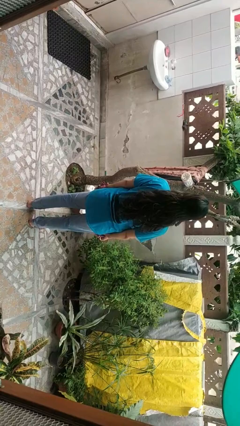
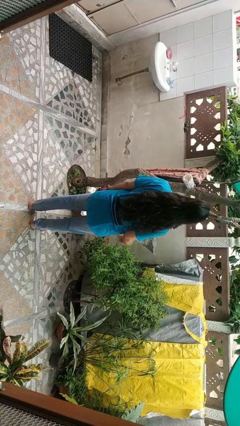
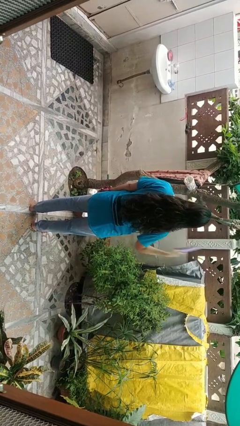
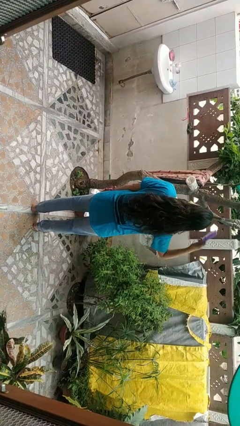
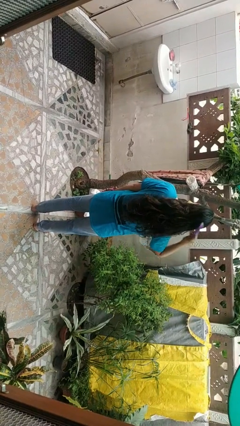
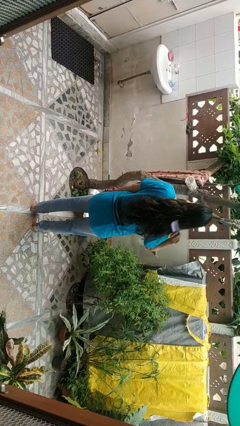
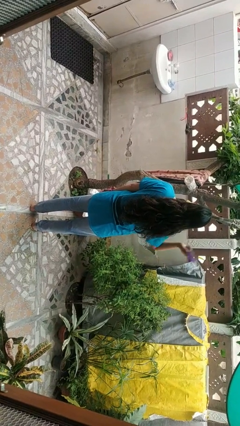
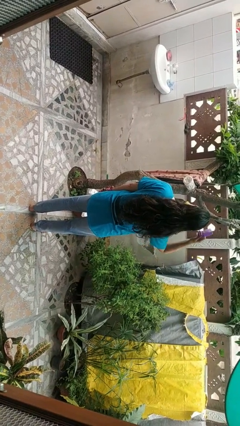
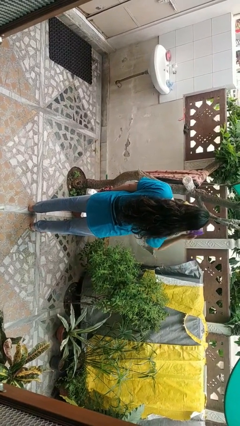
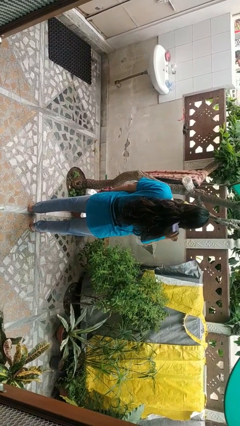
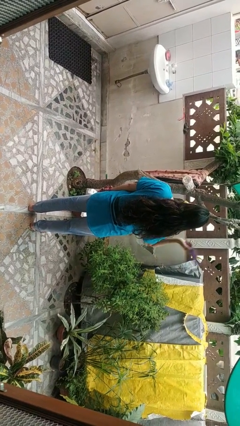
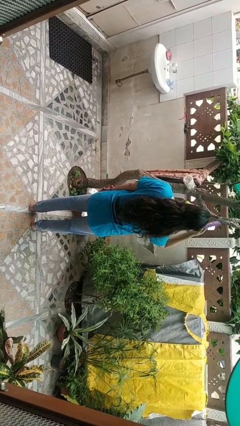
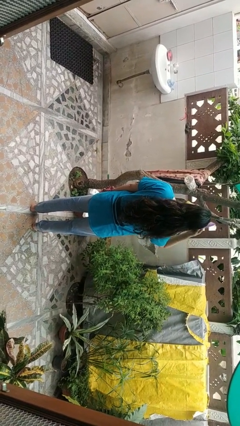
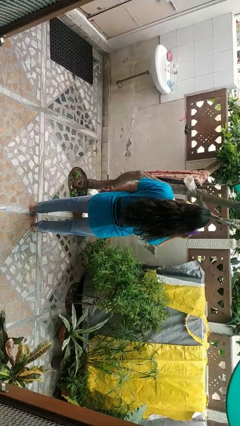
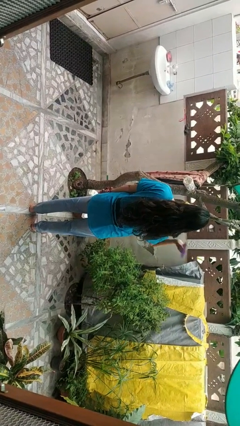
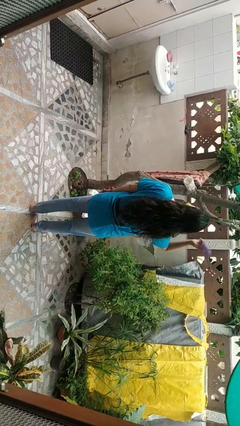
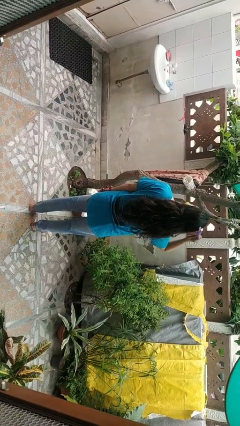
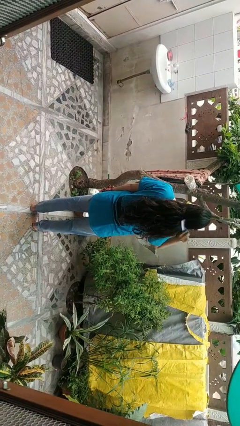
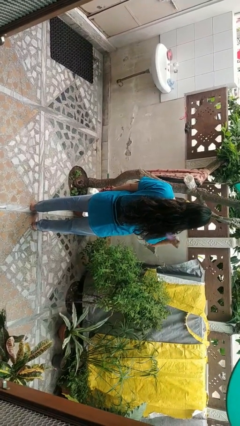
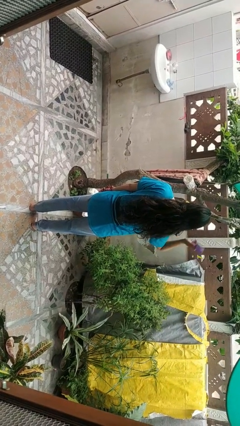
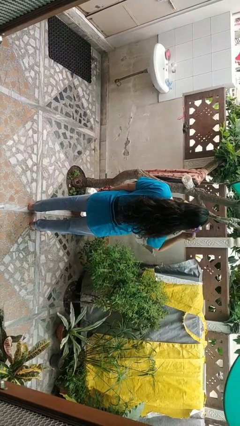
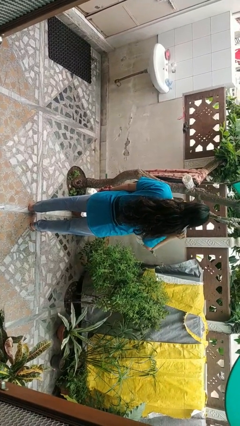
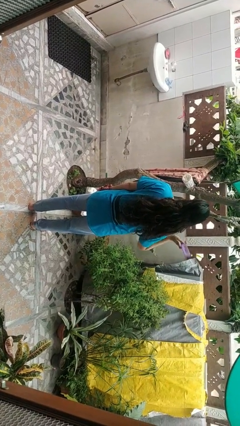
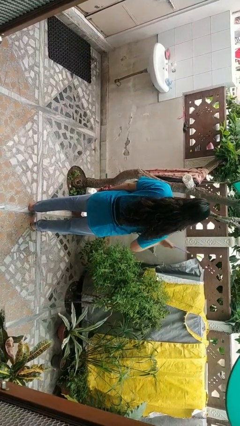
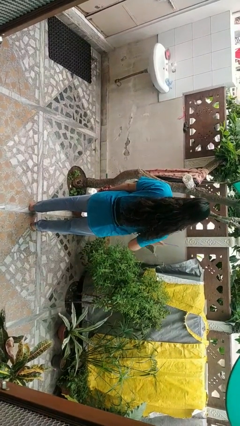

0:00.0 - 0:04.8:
person brushes hair

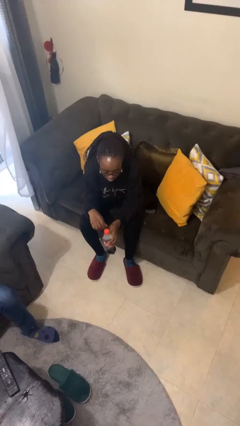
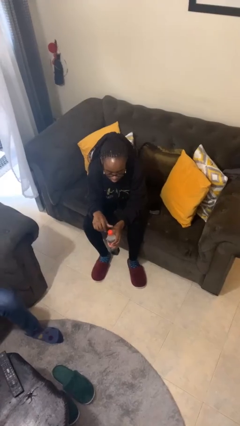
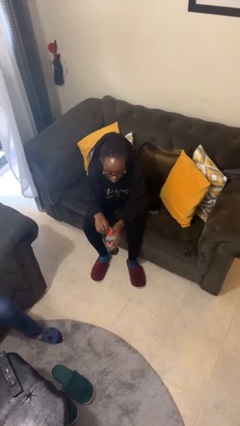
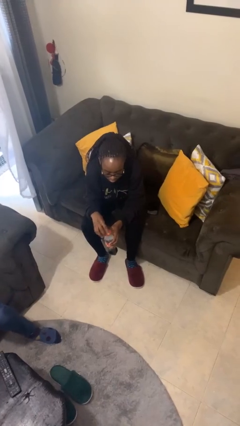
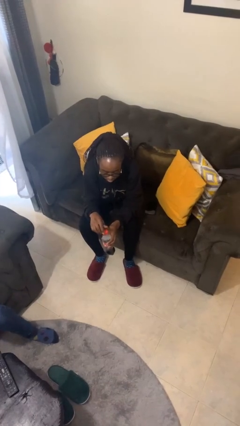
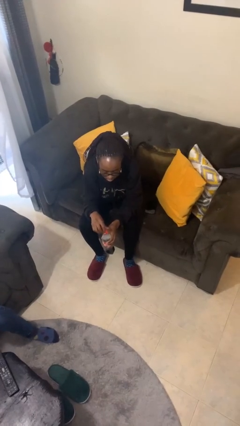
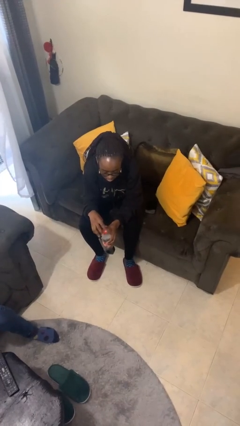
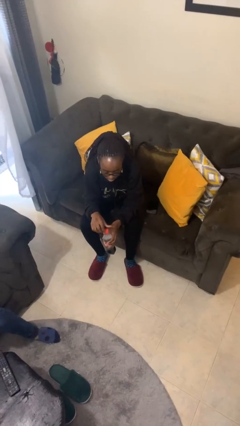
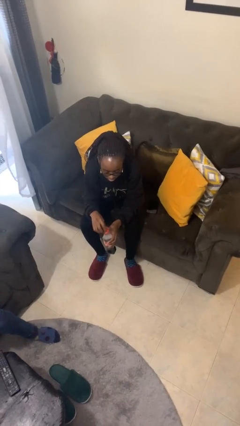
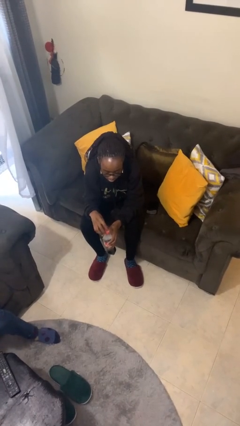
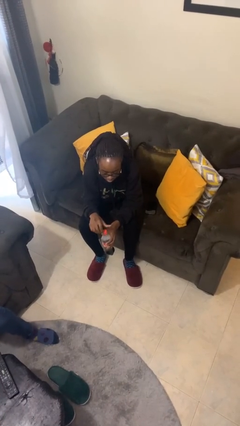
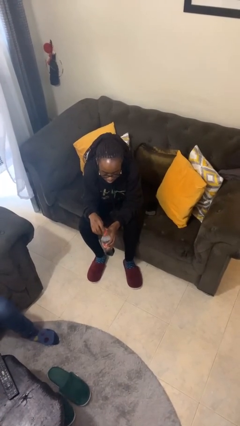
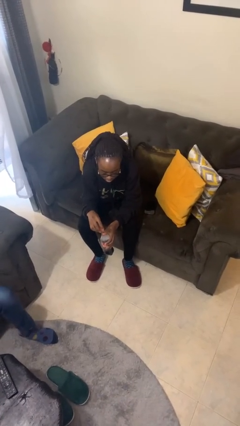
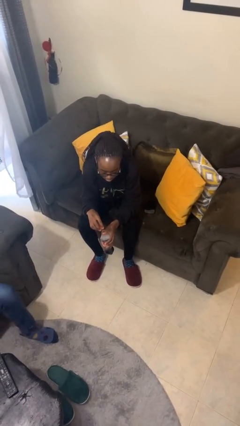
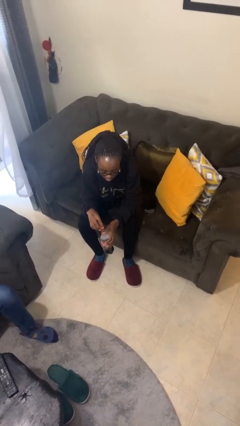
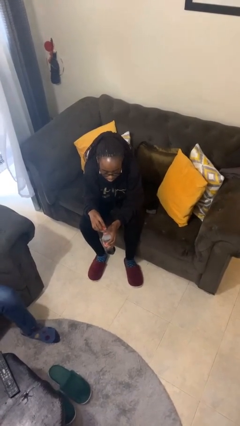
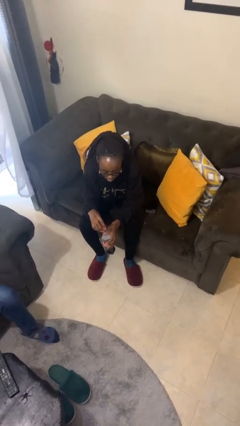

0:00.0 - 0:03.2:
person unscrews lid from bottle

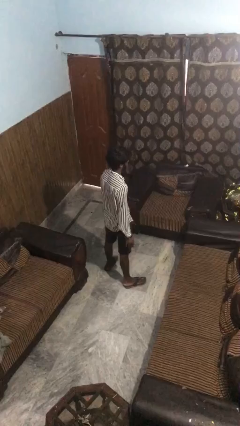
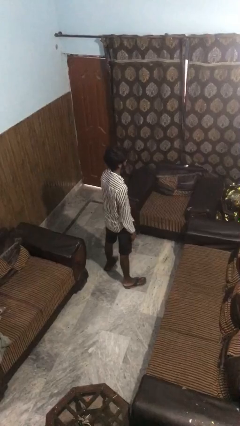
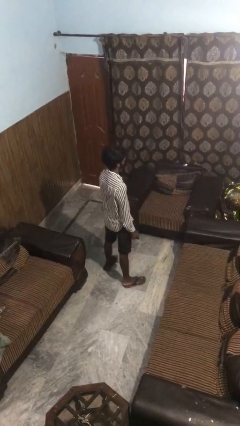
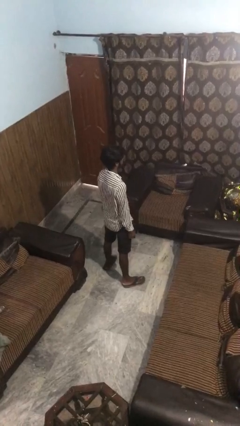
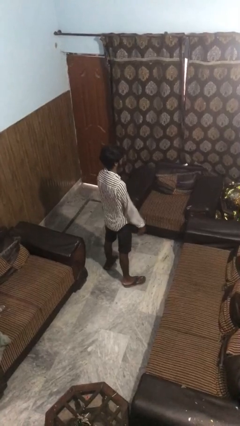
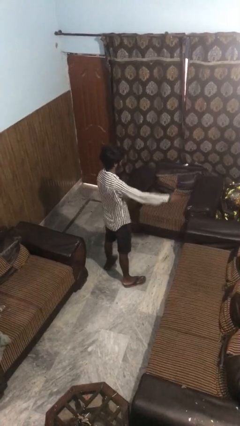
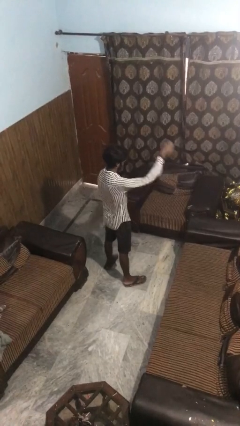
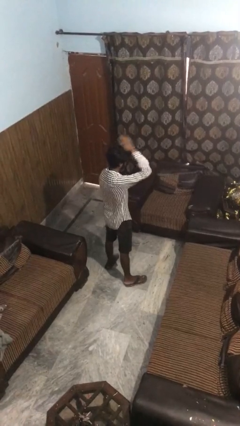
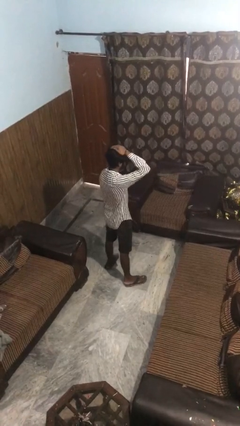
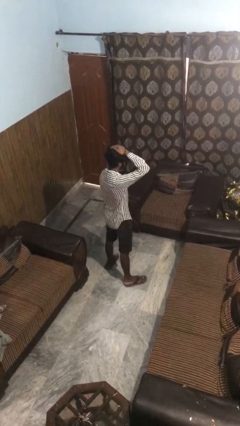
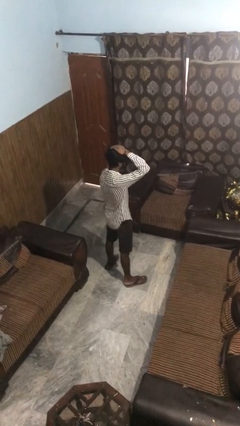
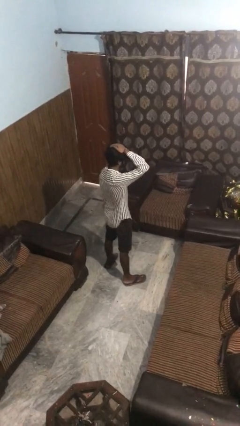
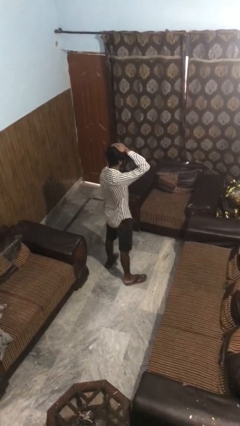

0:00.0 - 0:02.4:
person pats head

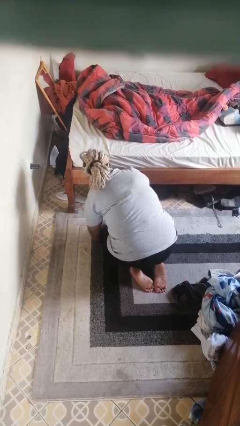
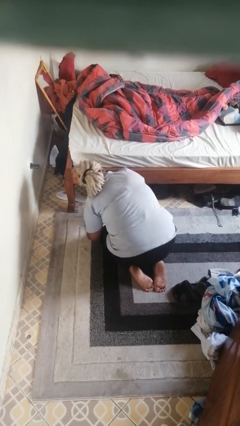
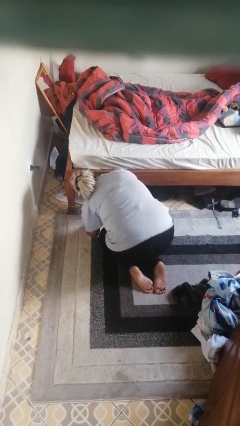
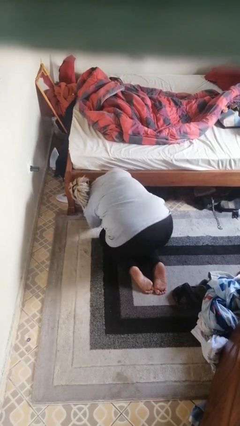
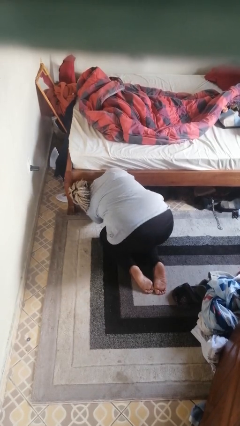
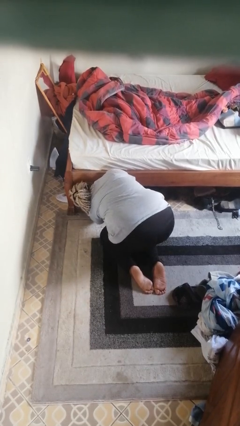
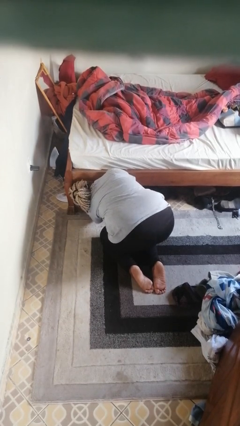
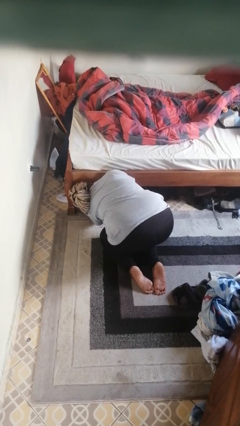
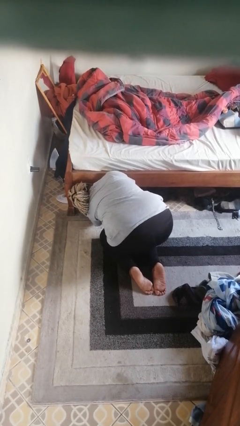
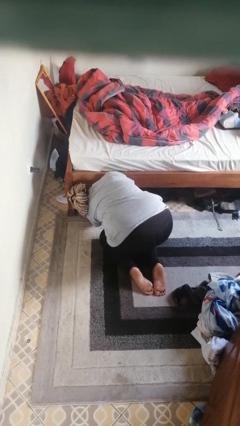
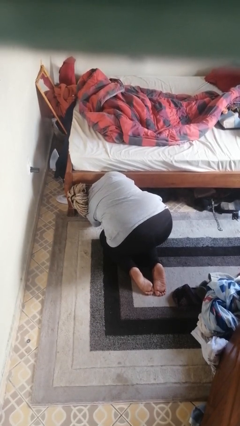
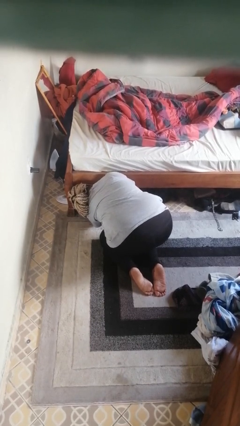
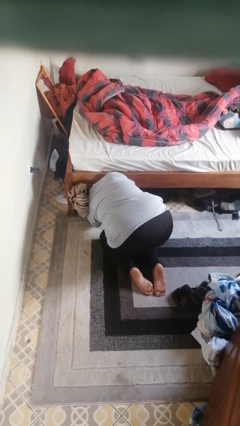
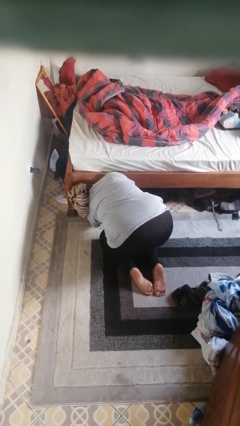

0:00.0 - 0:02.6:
person searches under bed

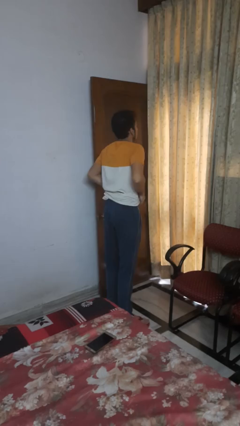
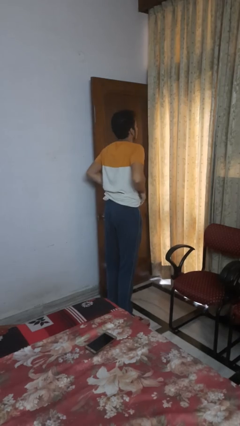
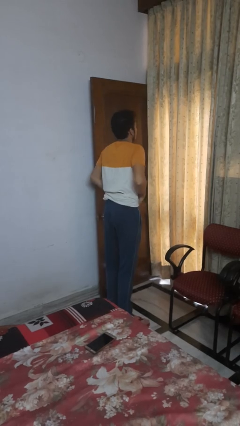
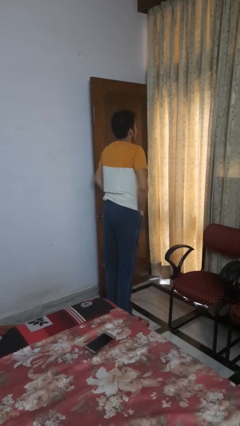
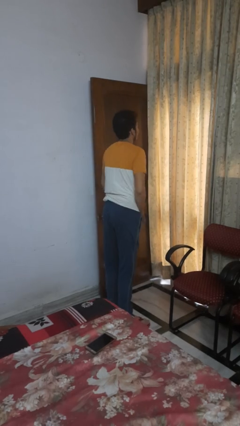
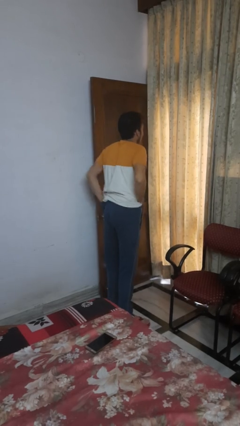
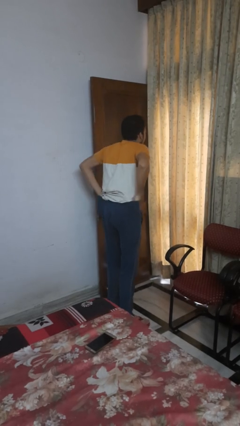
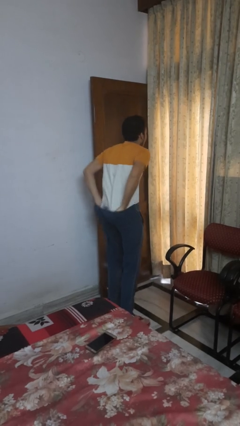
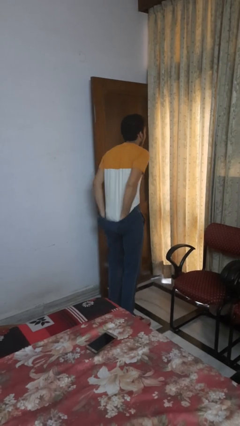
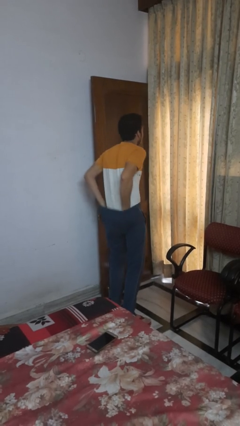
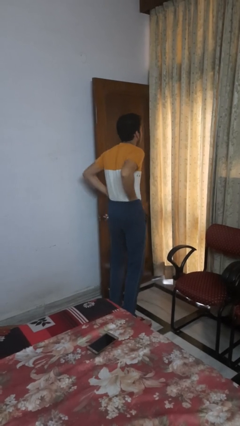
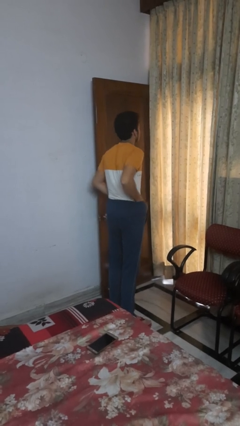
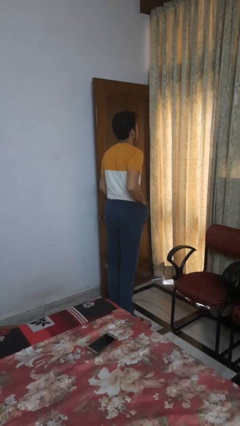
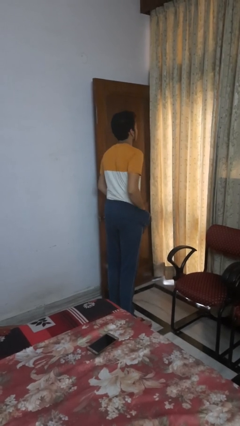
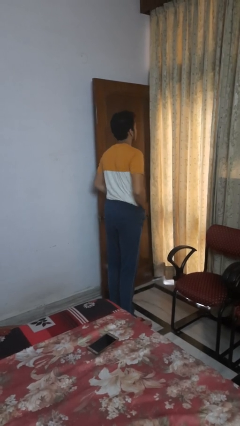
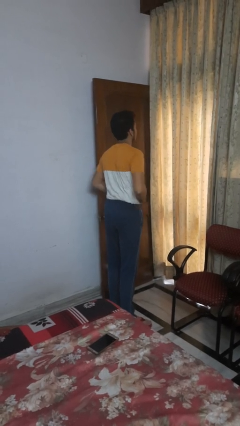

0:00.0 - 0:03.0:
person tucks in shirt

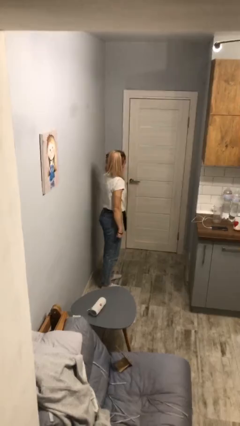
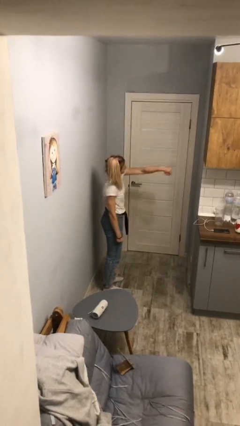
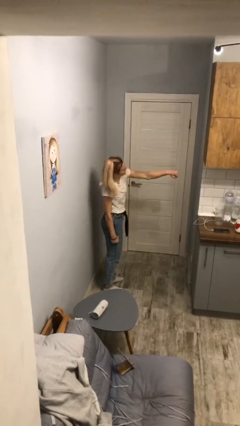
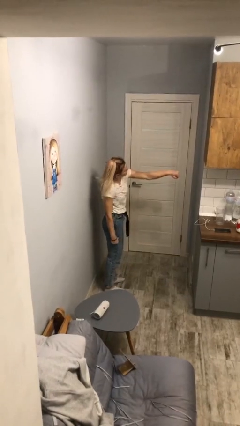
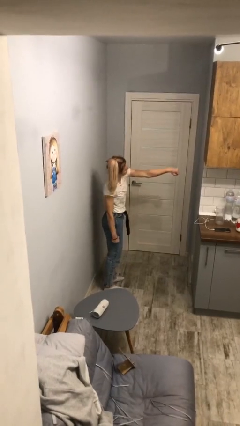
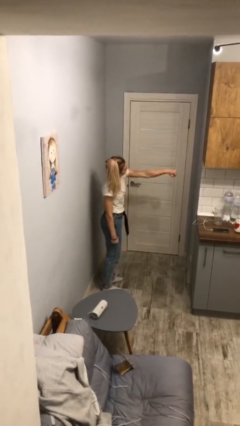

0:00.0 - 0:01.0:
person punches

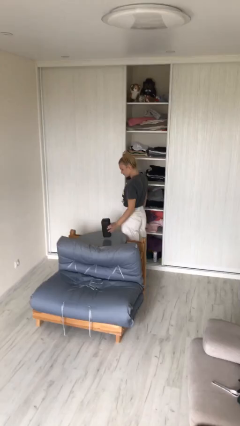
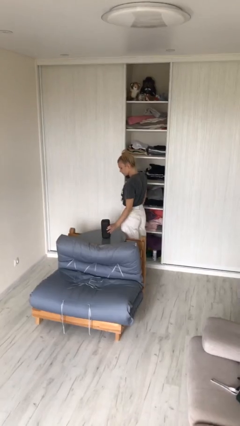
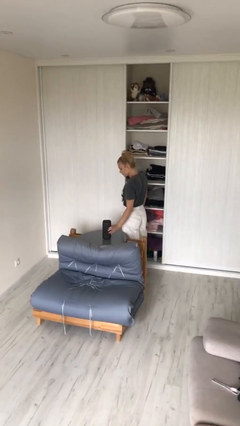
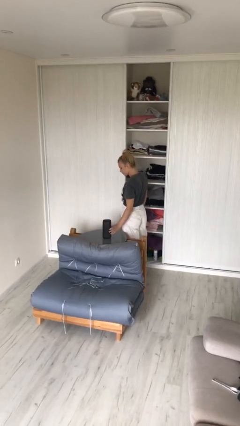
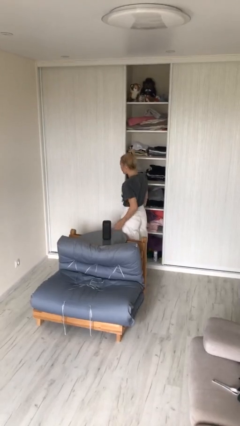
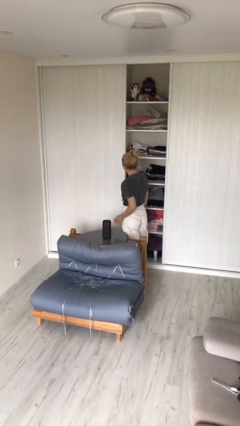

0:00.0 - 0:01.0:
person puts down object on table
